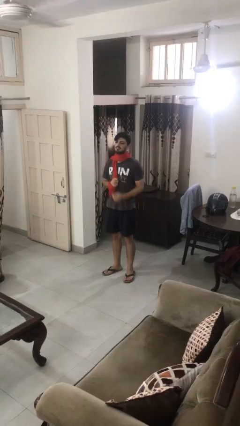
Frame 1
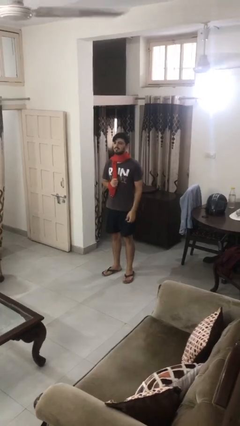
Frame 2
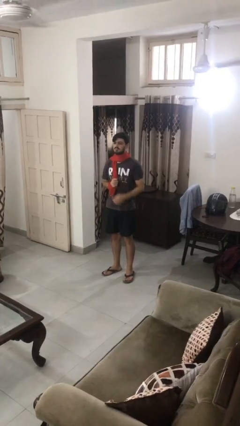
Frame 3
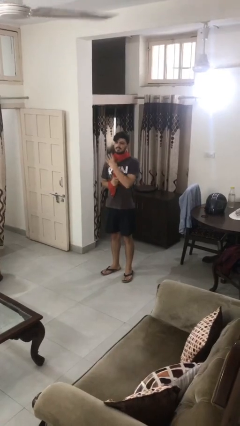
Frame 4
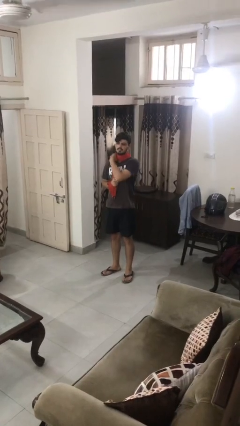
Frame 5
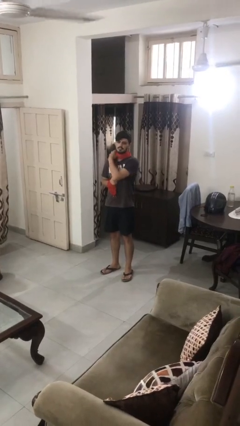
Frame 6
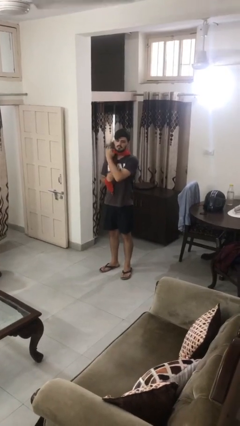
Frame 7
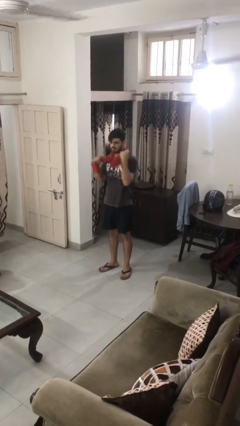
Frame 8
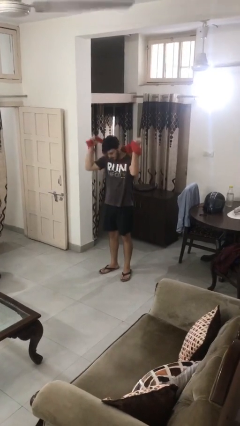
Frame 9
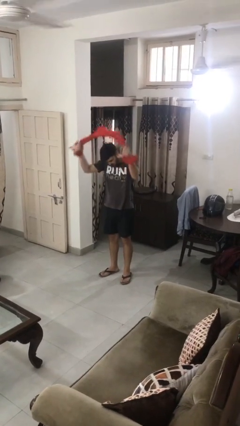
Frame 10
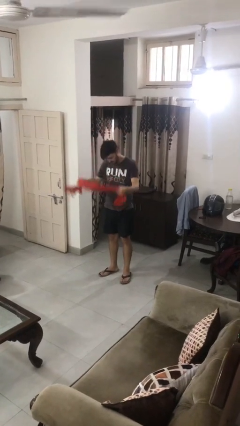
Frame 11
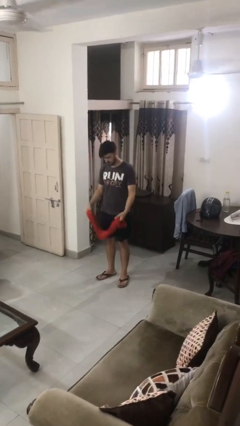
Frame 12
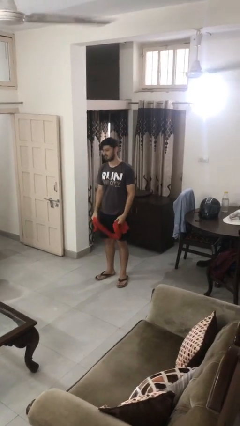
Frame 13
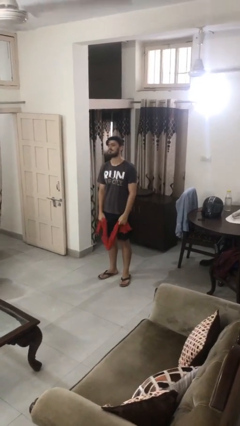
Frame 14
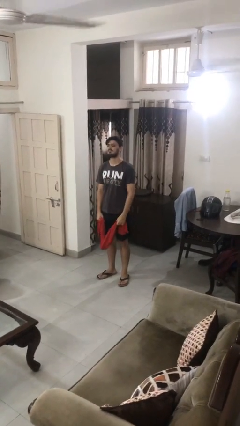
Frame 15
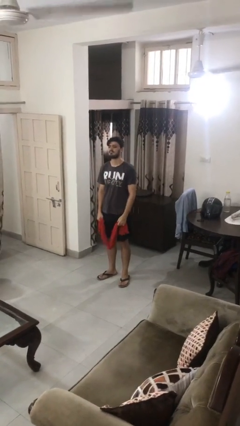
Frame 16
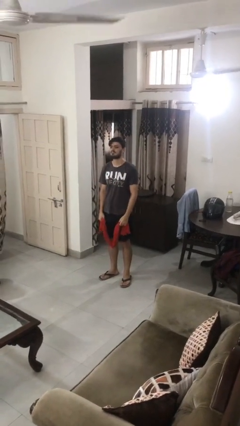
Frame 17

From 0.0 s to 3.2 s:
person takes off scarf

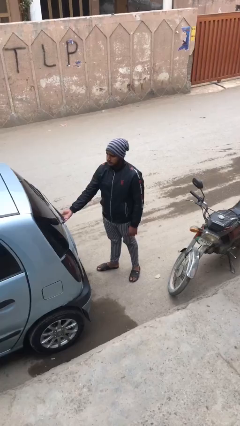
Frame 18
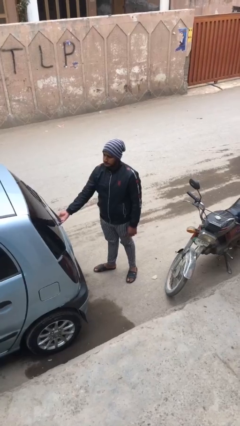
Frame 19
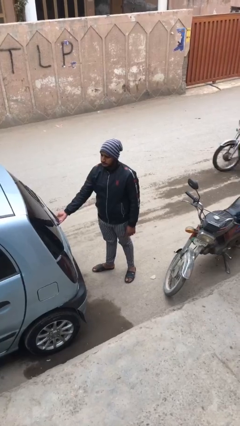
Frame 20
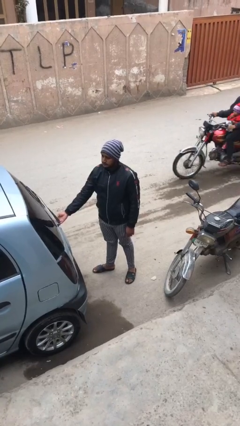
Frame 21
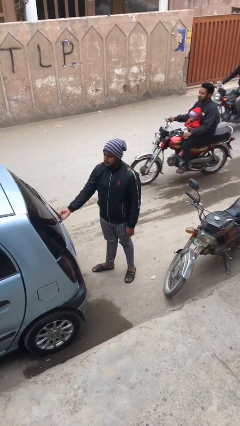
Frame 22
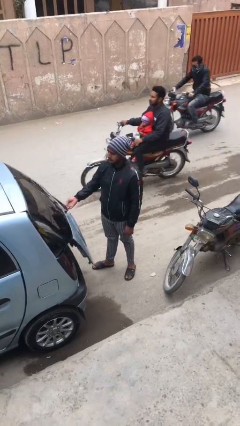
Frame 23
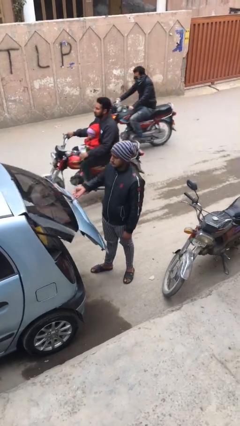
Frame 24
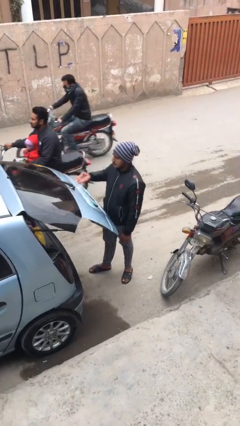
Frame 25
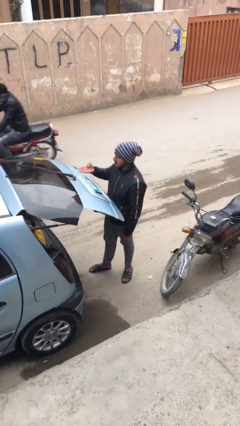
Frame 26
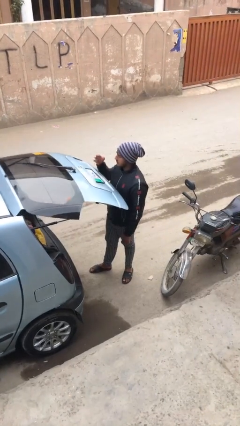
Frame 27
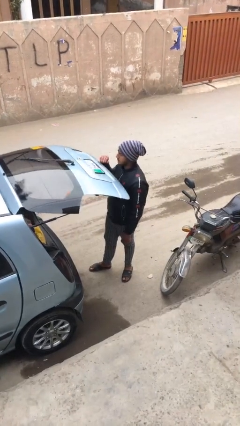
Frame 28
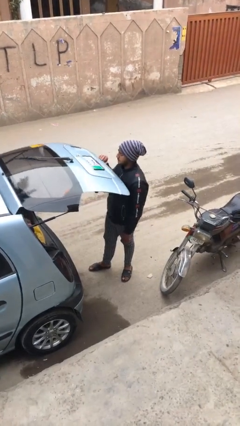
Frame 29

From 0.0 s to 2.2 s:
person opens car trunk

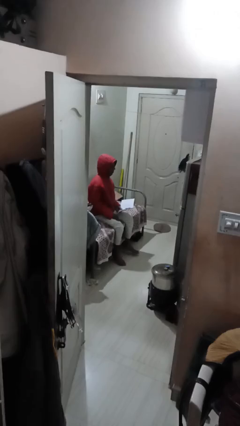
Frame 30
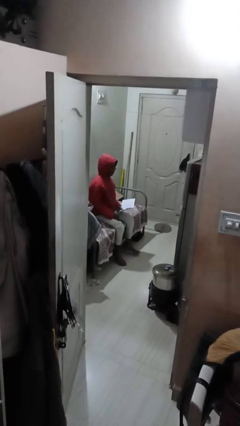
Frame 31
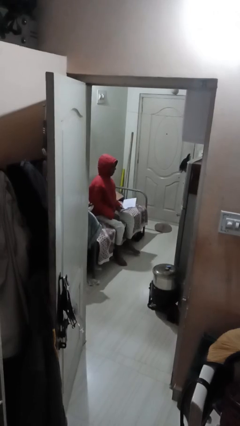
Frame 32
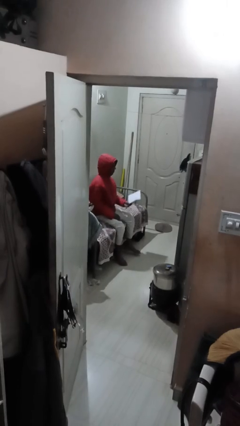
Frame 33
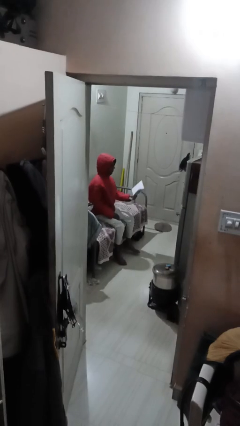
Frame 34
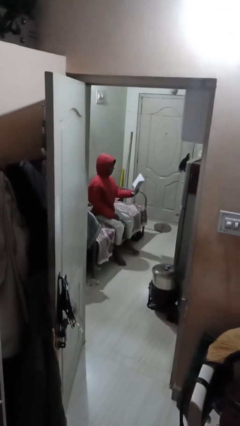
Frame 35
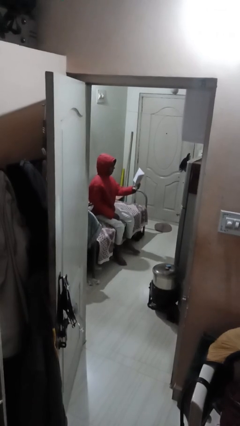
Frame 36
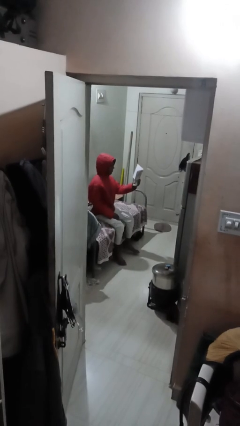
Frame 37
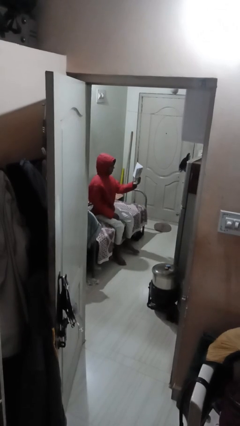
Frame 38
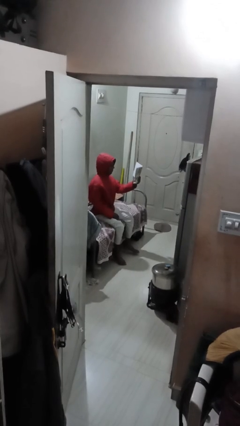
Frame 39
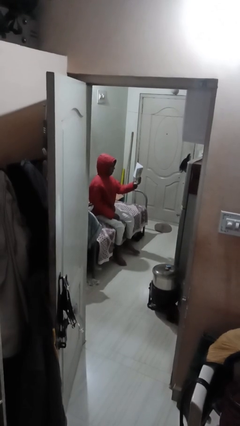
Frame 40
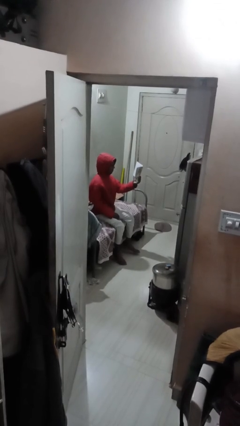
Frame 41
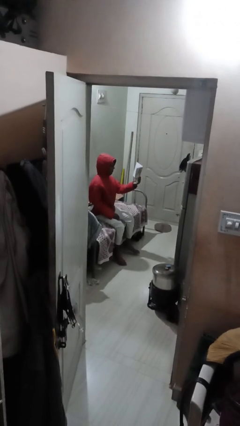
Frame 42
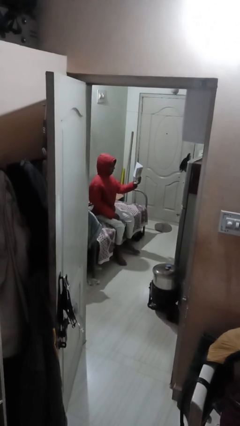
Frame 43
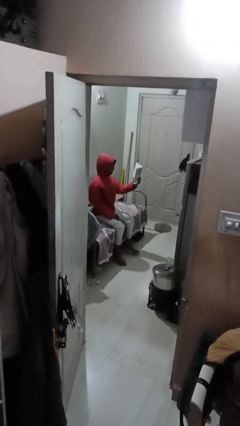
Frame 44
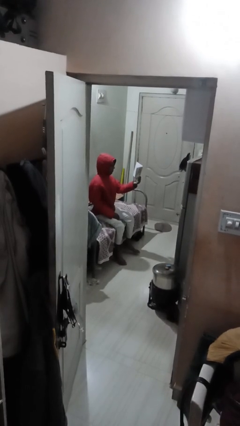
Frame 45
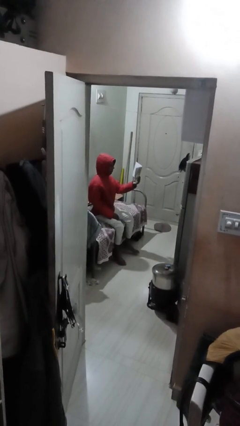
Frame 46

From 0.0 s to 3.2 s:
person reads document

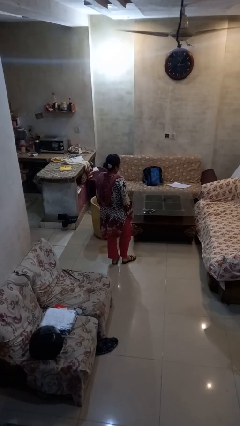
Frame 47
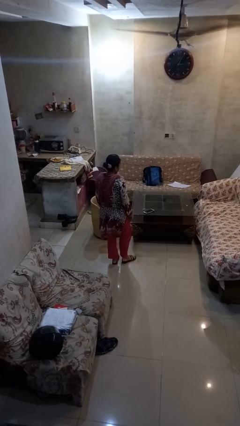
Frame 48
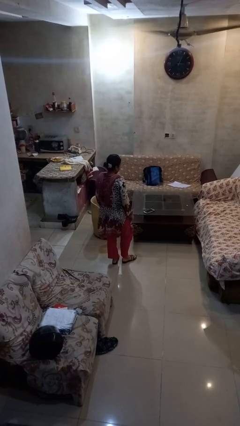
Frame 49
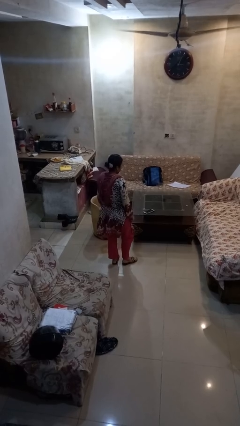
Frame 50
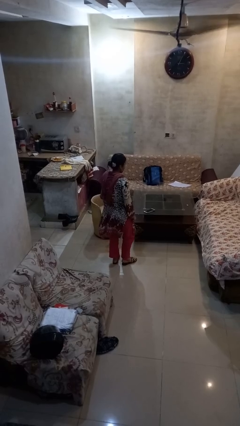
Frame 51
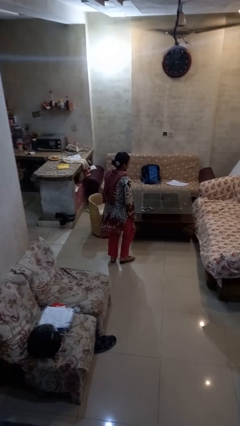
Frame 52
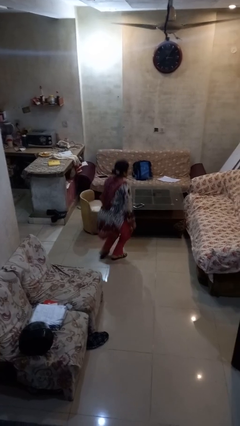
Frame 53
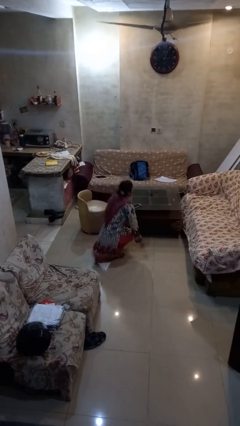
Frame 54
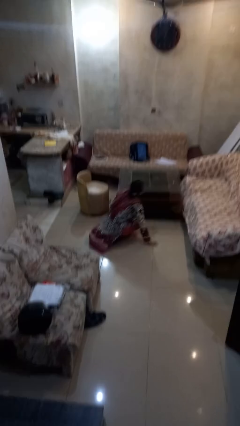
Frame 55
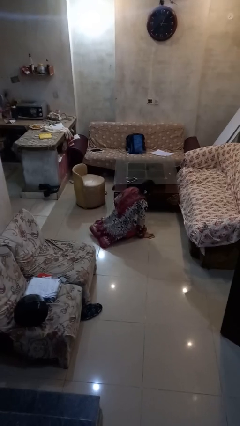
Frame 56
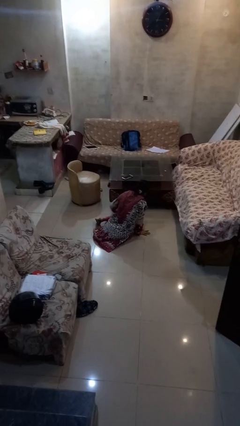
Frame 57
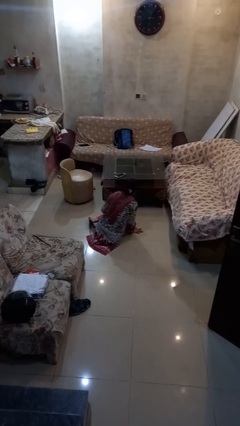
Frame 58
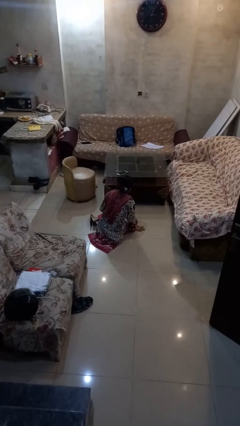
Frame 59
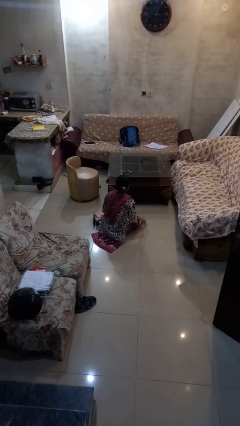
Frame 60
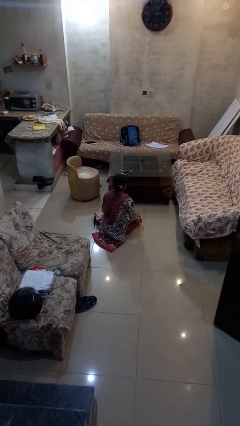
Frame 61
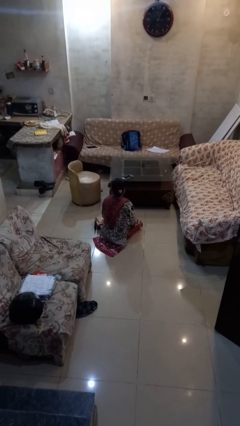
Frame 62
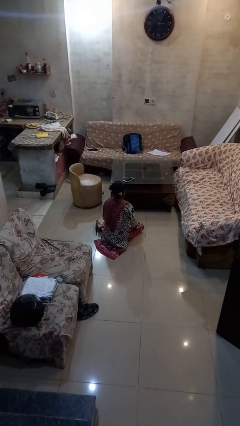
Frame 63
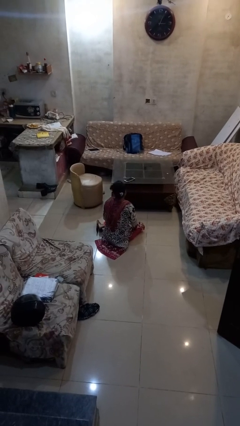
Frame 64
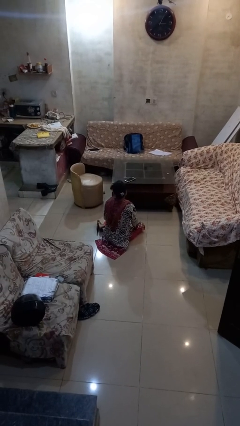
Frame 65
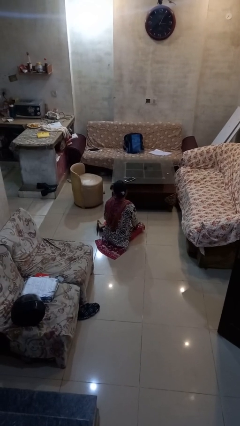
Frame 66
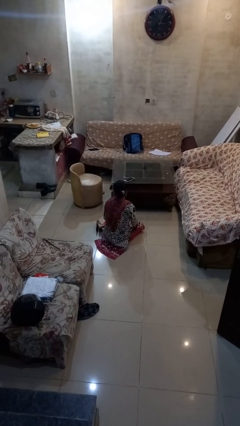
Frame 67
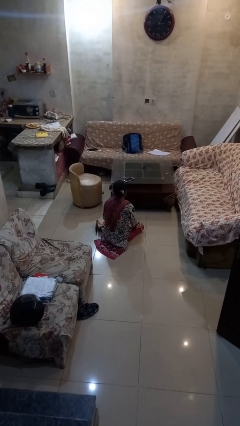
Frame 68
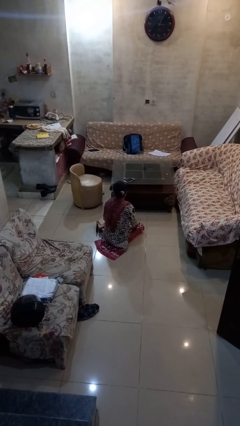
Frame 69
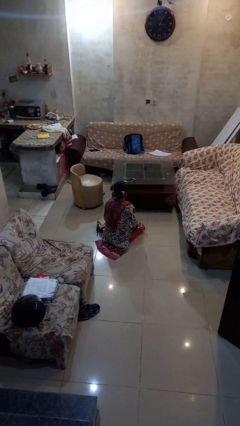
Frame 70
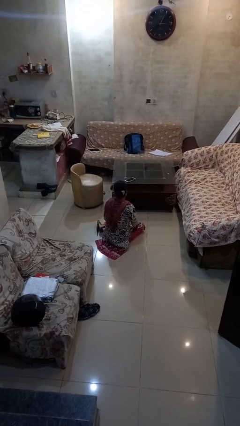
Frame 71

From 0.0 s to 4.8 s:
person falls while standing

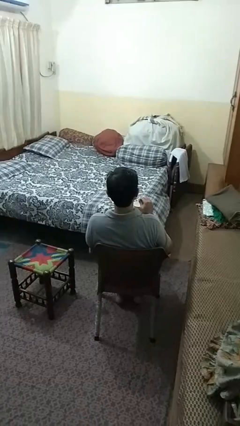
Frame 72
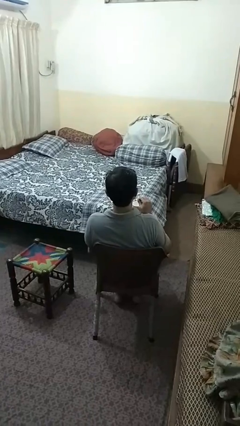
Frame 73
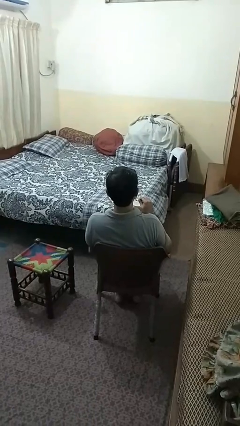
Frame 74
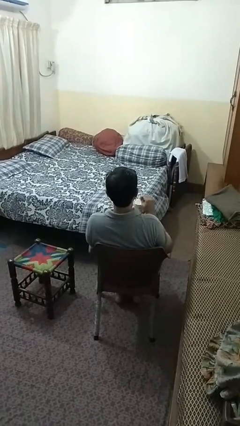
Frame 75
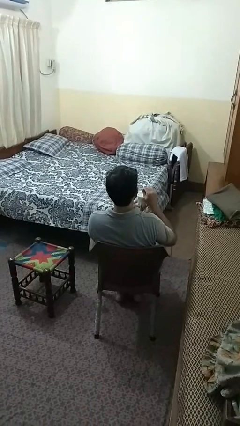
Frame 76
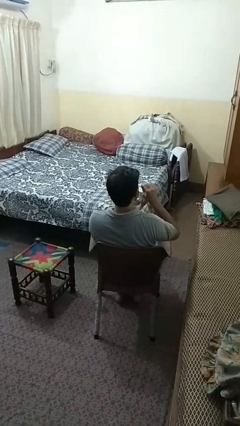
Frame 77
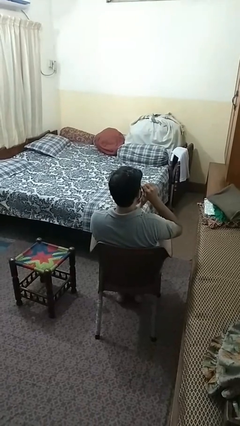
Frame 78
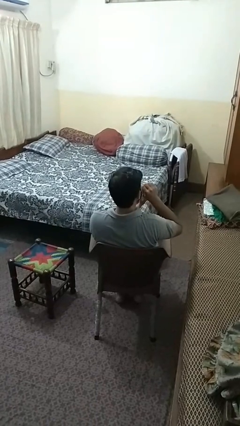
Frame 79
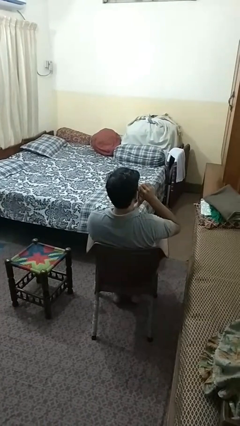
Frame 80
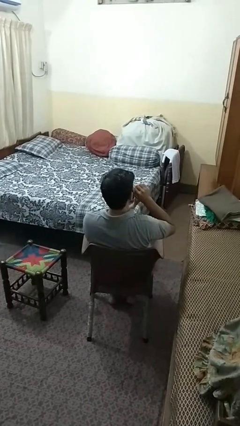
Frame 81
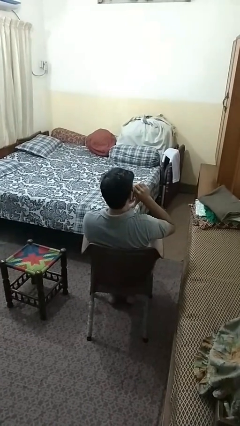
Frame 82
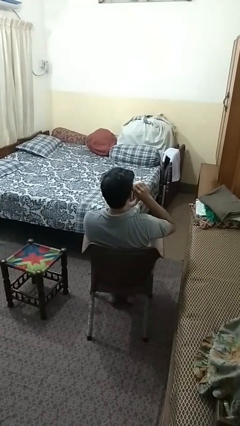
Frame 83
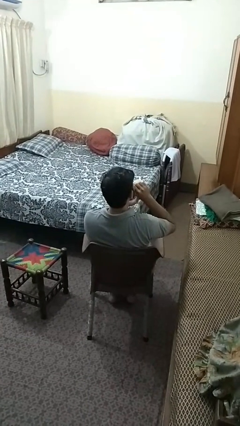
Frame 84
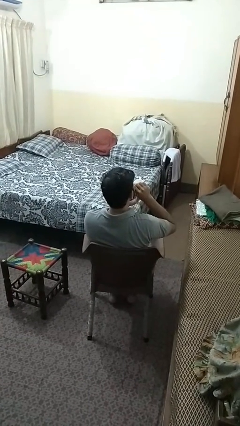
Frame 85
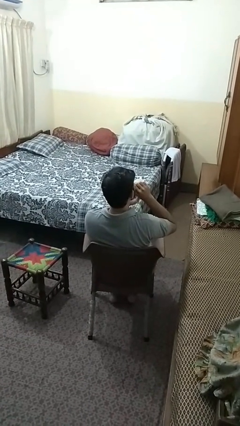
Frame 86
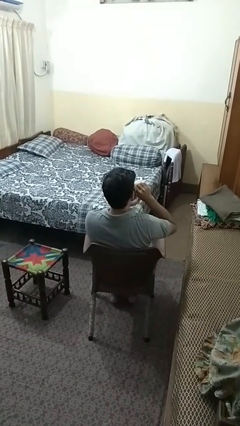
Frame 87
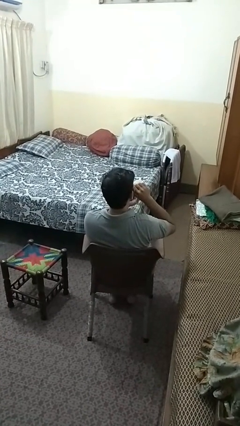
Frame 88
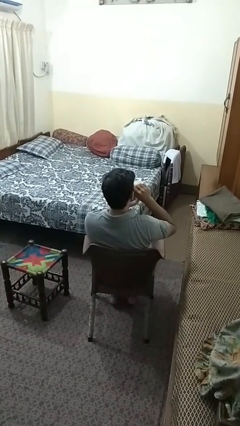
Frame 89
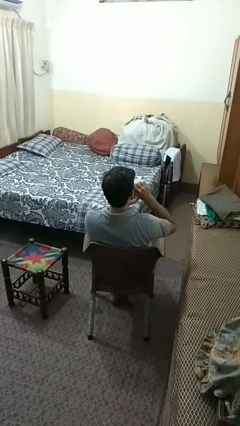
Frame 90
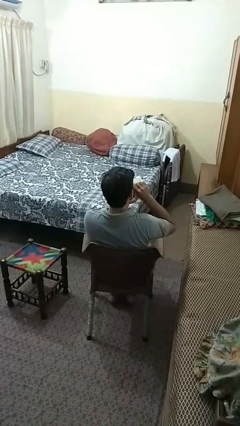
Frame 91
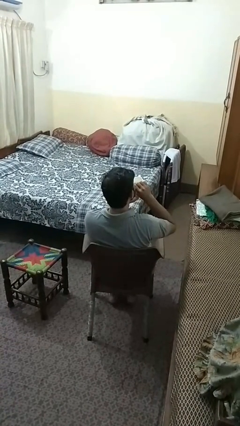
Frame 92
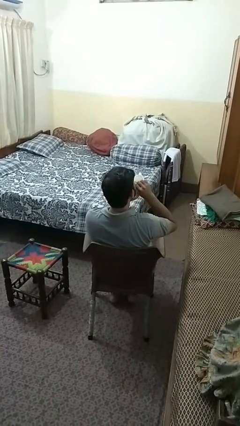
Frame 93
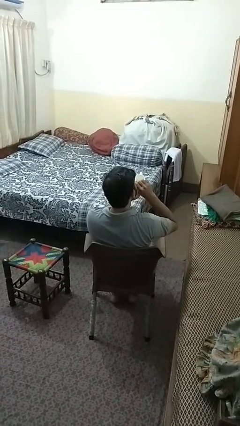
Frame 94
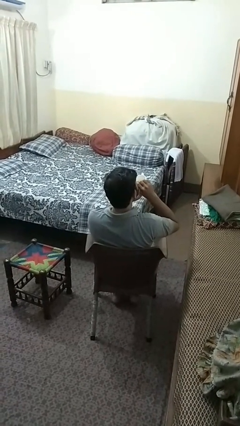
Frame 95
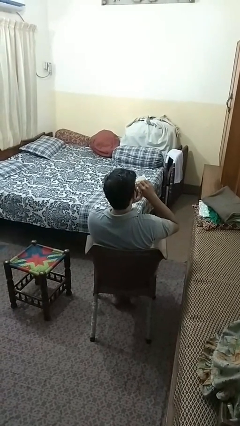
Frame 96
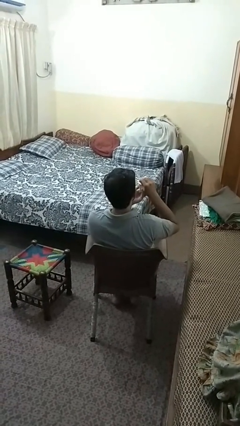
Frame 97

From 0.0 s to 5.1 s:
person drinks from straw
